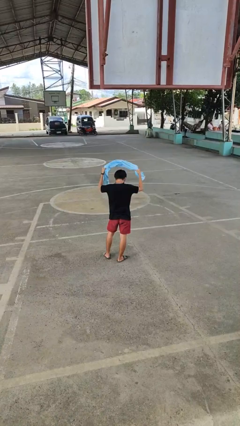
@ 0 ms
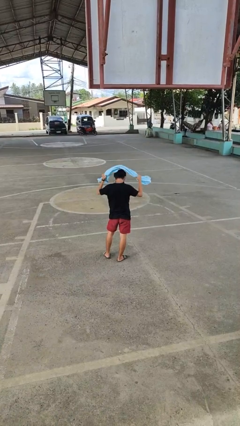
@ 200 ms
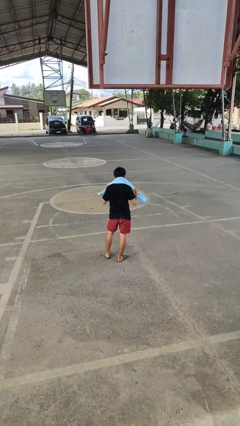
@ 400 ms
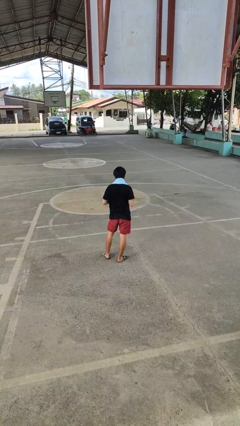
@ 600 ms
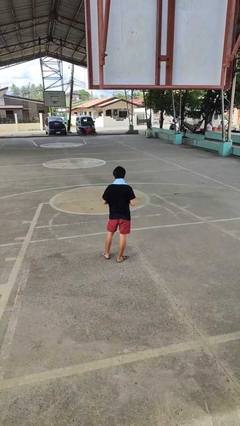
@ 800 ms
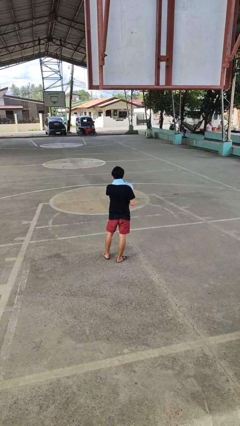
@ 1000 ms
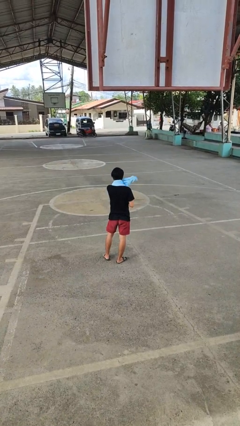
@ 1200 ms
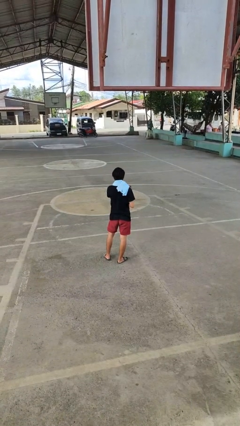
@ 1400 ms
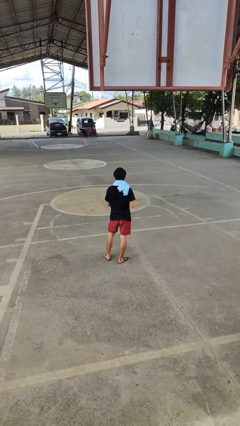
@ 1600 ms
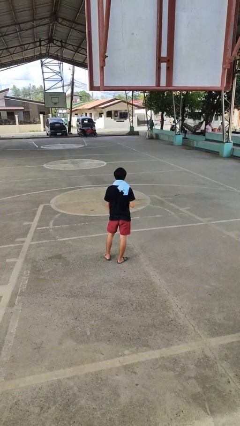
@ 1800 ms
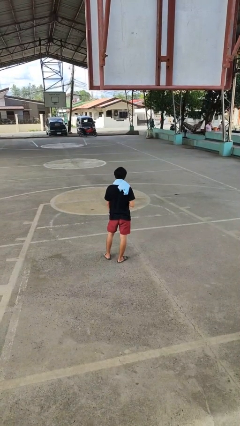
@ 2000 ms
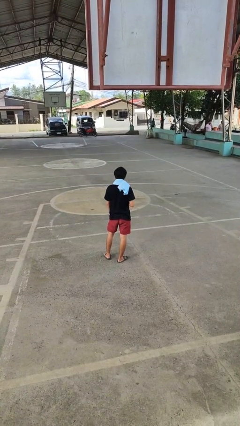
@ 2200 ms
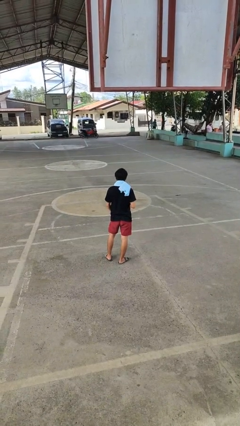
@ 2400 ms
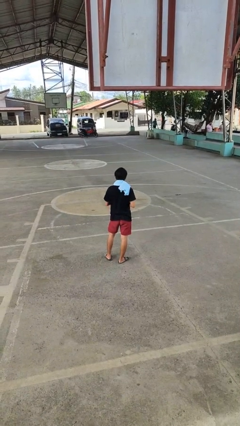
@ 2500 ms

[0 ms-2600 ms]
person puts on scarf

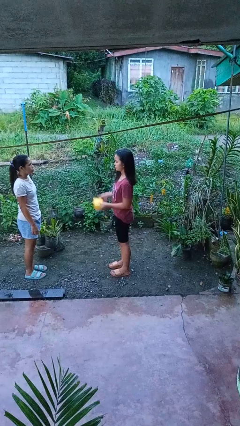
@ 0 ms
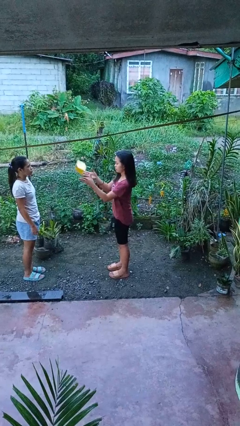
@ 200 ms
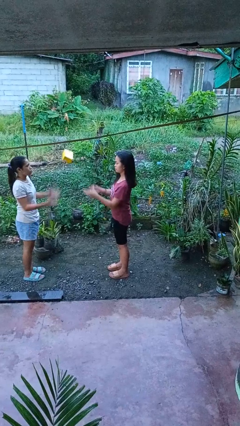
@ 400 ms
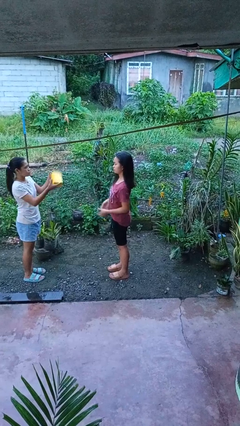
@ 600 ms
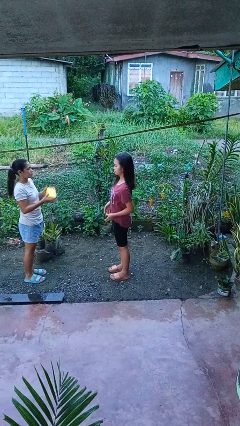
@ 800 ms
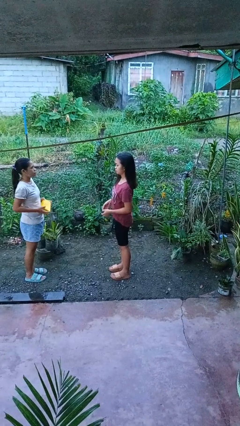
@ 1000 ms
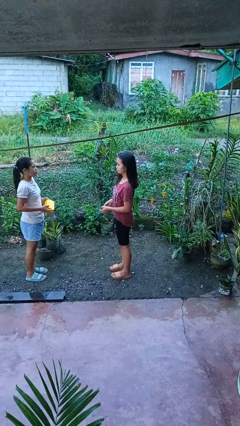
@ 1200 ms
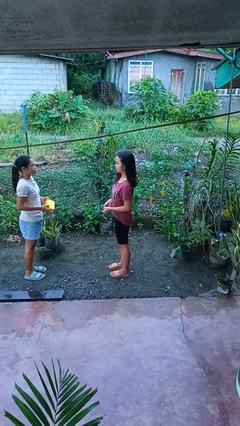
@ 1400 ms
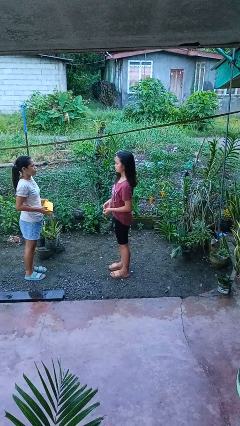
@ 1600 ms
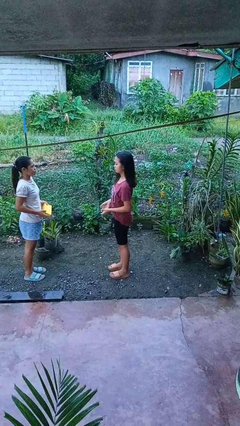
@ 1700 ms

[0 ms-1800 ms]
person throws object to person

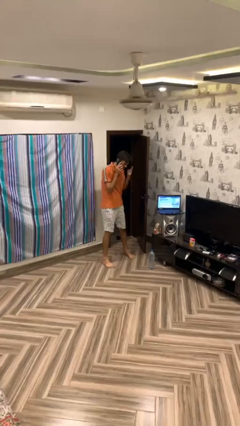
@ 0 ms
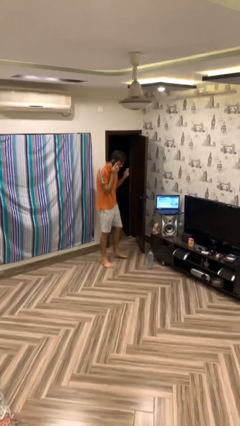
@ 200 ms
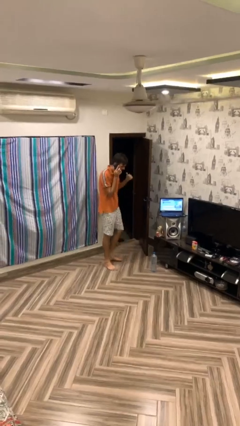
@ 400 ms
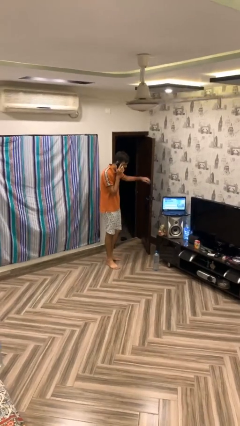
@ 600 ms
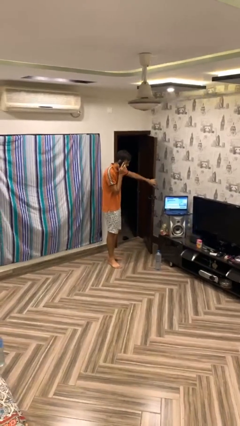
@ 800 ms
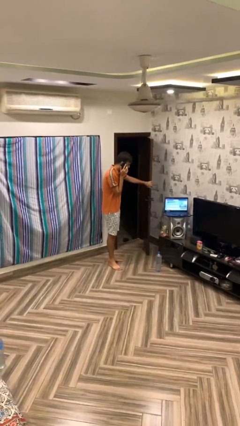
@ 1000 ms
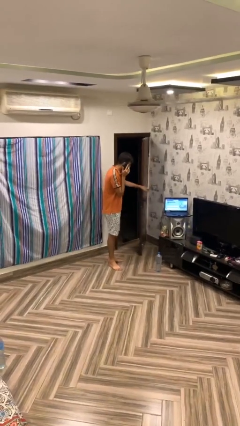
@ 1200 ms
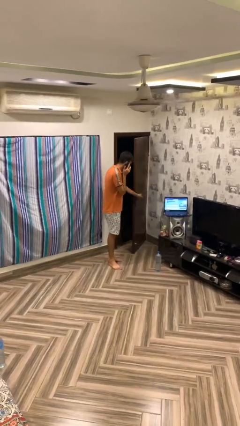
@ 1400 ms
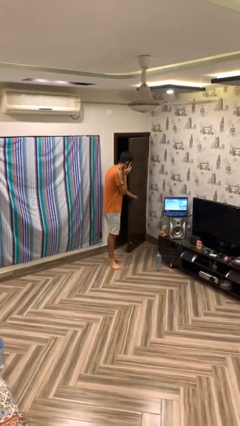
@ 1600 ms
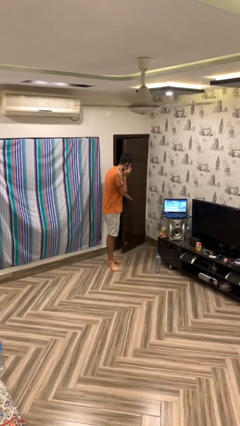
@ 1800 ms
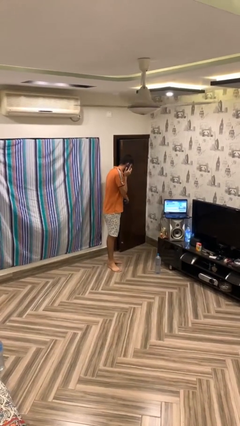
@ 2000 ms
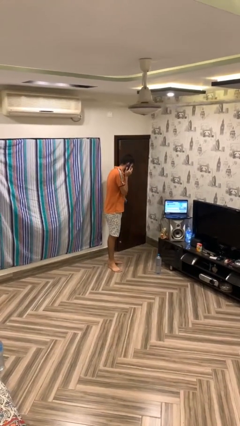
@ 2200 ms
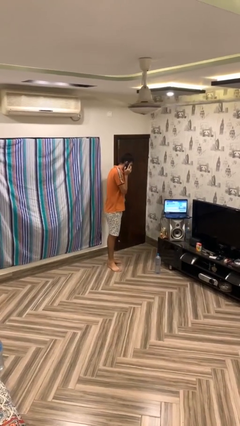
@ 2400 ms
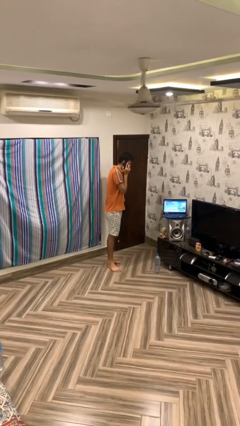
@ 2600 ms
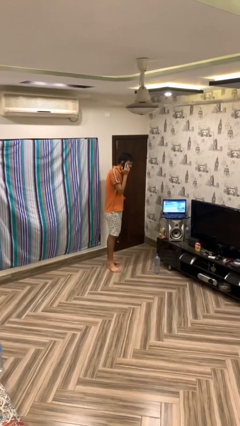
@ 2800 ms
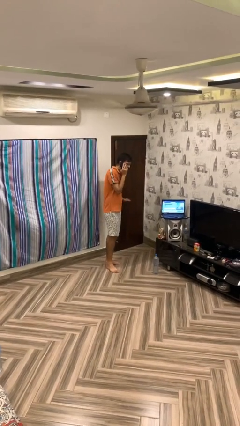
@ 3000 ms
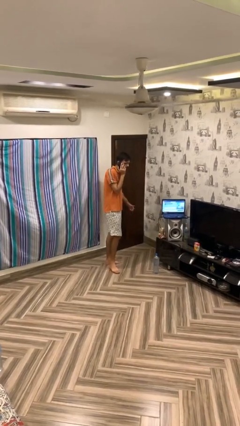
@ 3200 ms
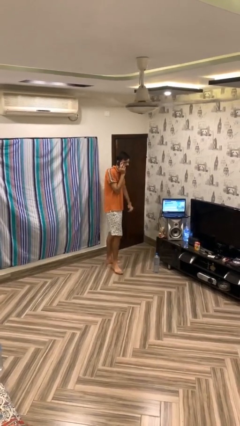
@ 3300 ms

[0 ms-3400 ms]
person closes facility door

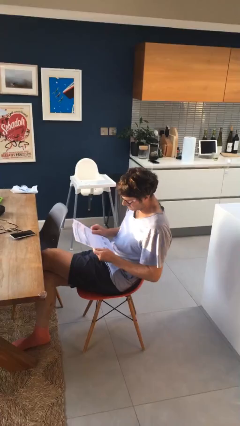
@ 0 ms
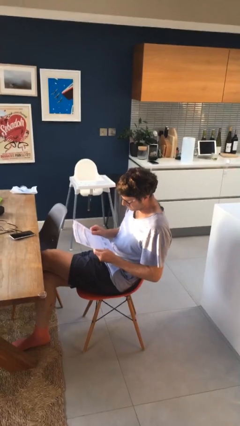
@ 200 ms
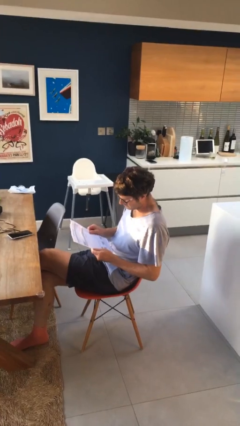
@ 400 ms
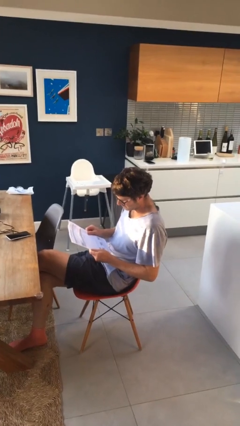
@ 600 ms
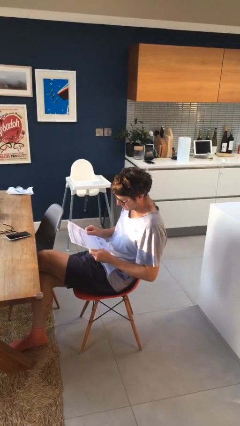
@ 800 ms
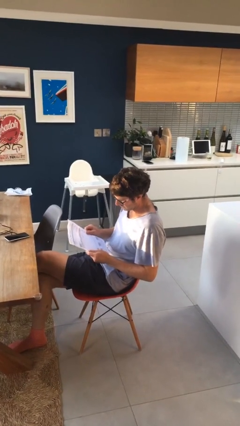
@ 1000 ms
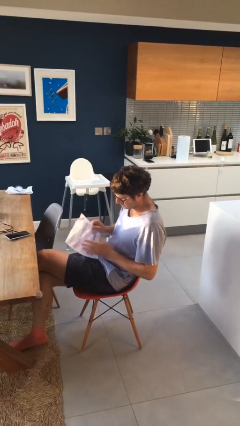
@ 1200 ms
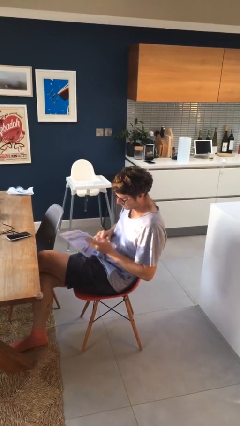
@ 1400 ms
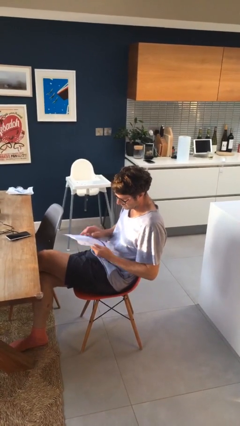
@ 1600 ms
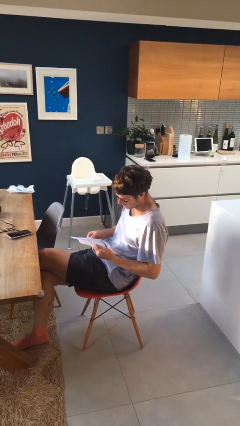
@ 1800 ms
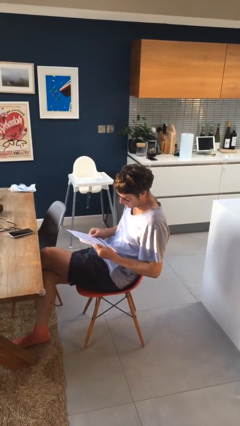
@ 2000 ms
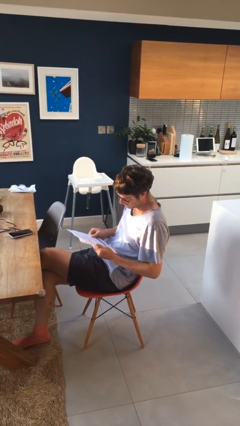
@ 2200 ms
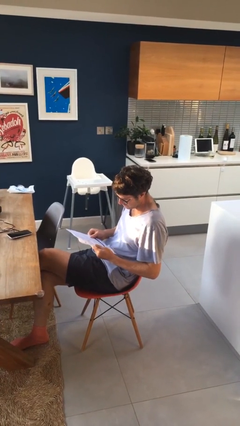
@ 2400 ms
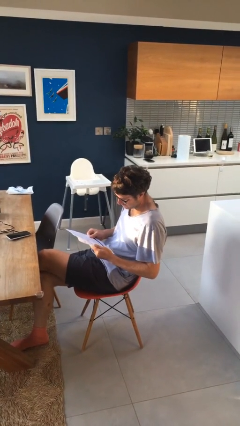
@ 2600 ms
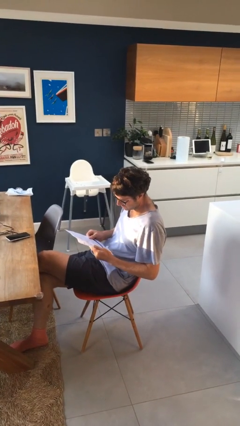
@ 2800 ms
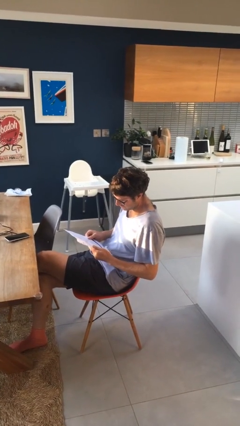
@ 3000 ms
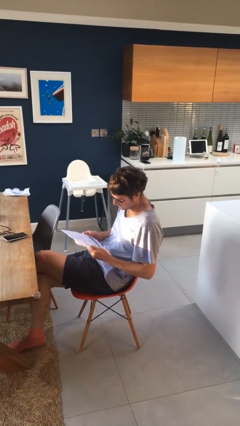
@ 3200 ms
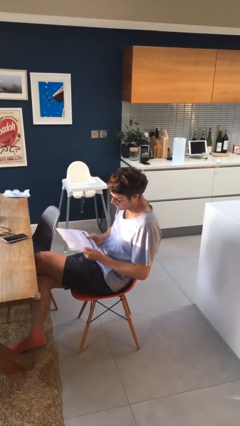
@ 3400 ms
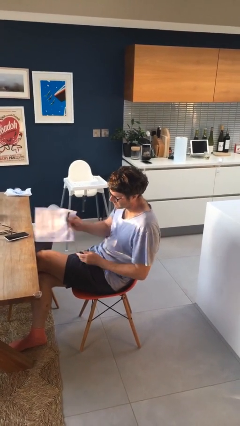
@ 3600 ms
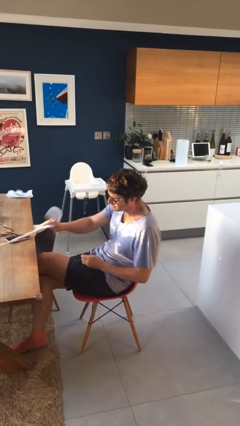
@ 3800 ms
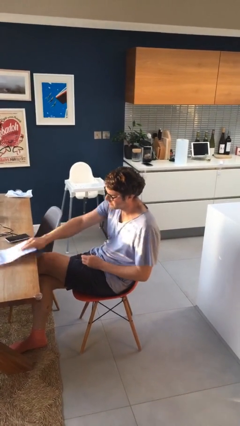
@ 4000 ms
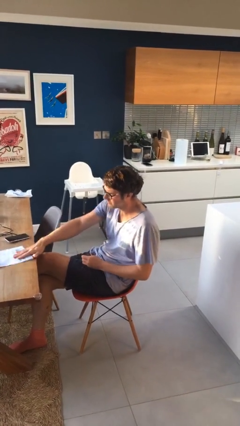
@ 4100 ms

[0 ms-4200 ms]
person reads document

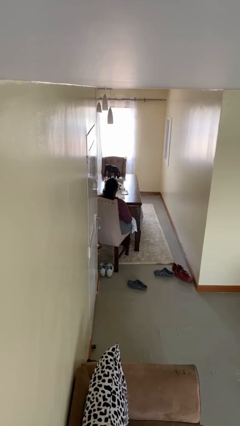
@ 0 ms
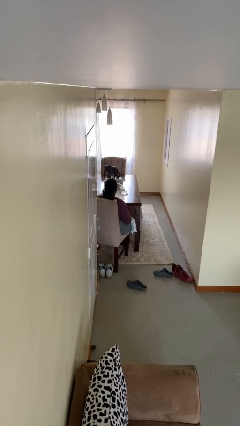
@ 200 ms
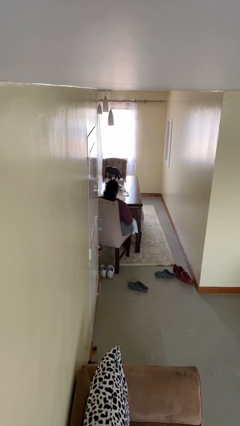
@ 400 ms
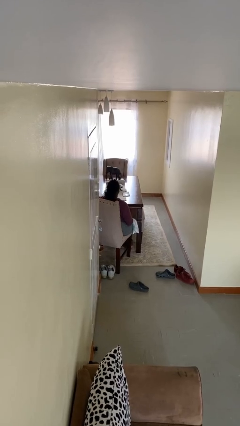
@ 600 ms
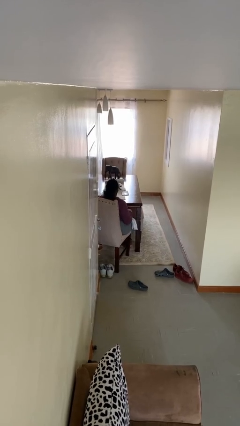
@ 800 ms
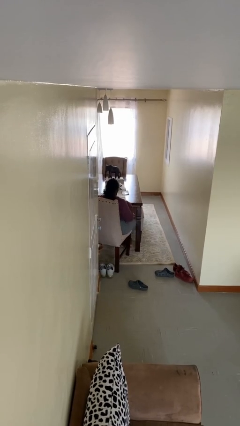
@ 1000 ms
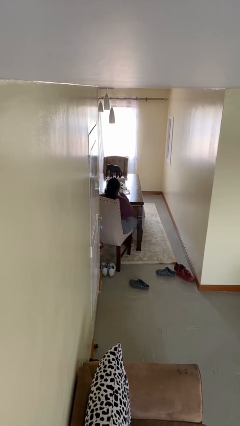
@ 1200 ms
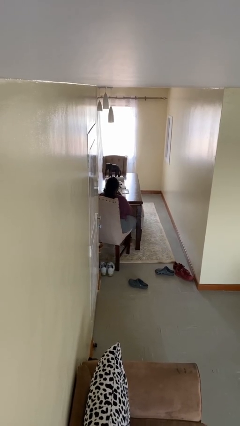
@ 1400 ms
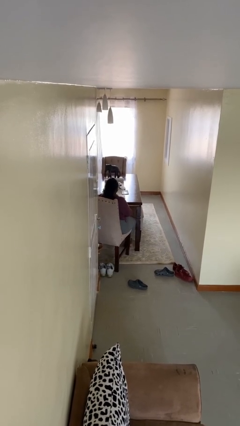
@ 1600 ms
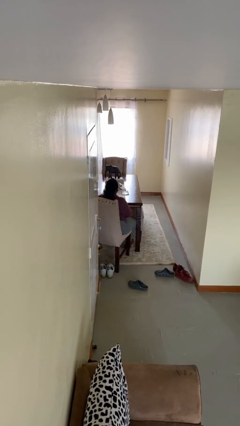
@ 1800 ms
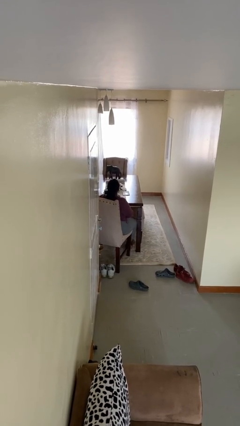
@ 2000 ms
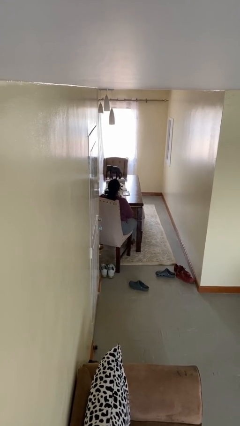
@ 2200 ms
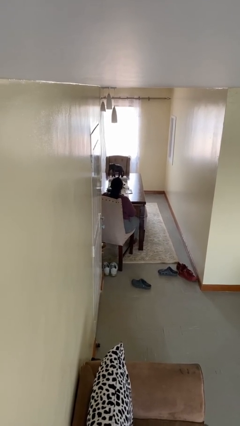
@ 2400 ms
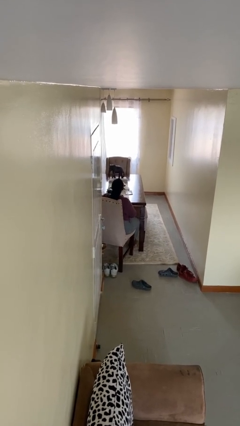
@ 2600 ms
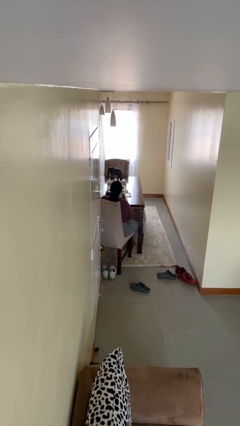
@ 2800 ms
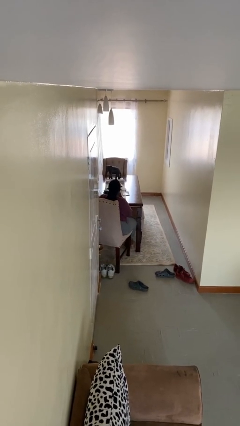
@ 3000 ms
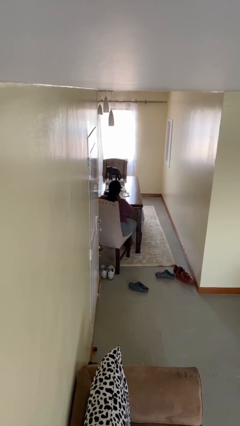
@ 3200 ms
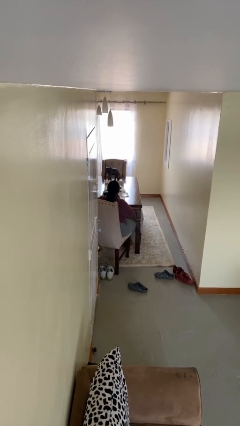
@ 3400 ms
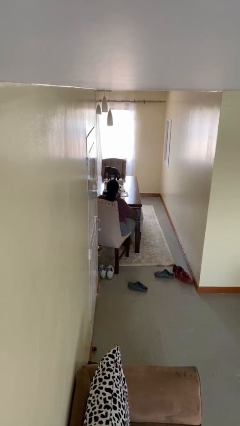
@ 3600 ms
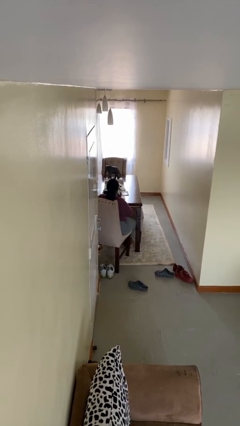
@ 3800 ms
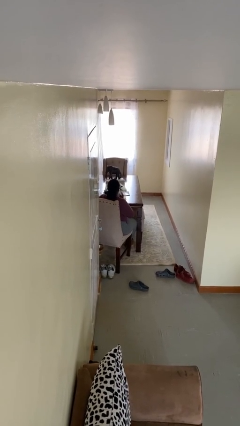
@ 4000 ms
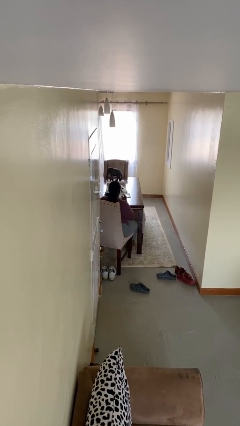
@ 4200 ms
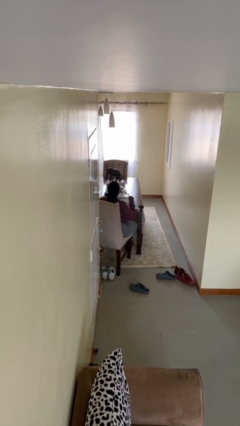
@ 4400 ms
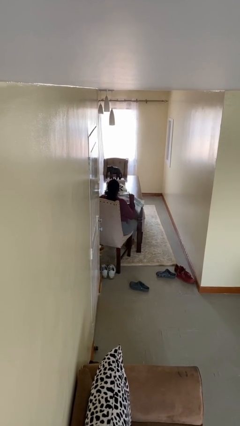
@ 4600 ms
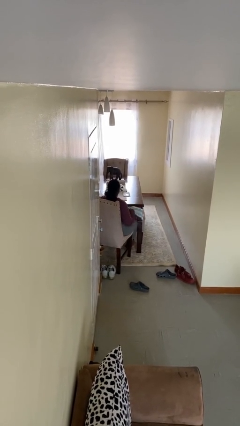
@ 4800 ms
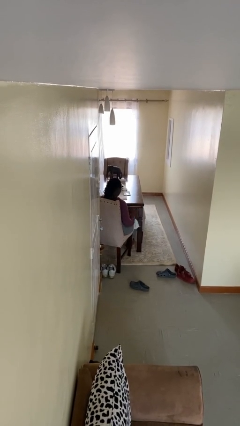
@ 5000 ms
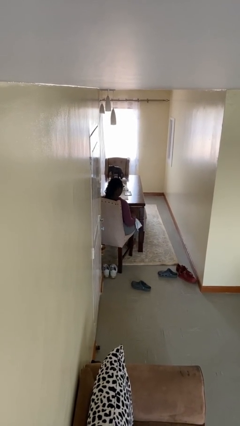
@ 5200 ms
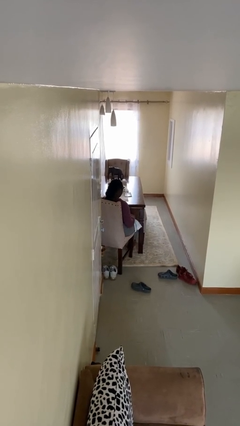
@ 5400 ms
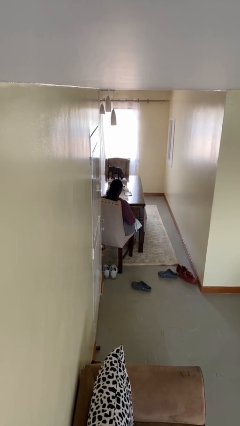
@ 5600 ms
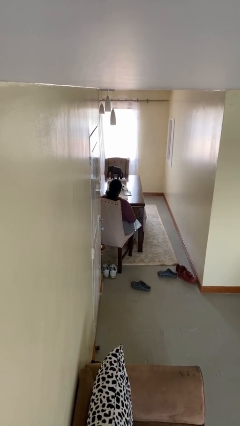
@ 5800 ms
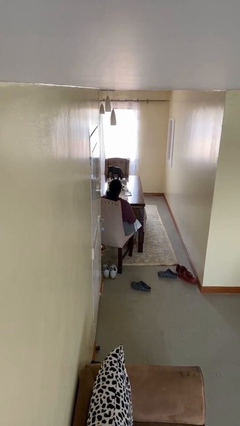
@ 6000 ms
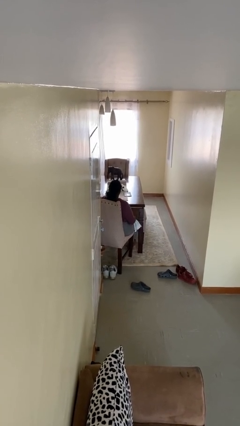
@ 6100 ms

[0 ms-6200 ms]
person wipes mouth with napkin
